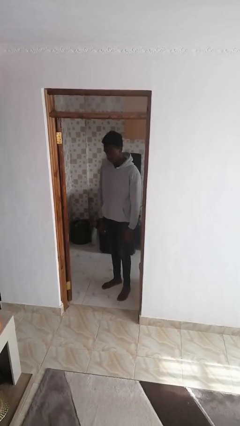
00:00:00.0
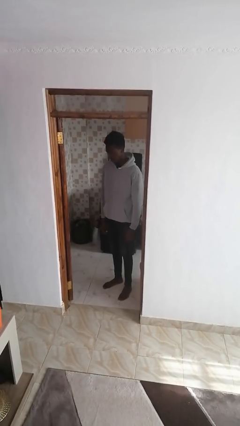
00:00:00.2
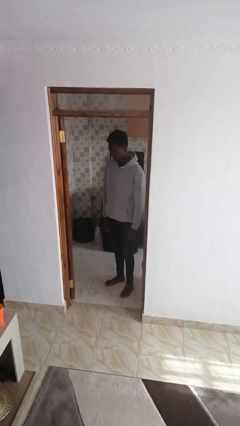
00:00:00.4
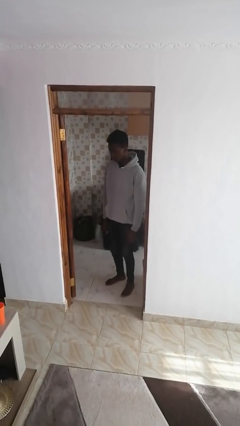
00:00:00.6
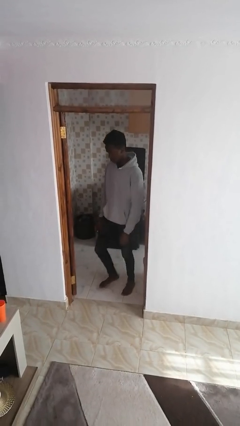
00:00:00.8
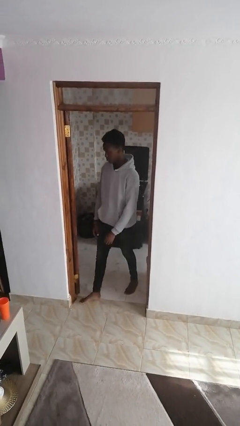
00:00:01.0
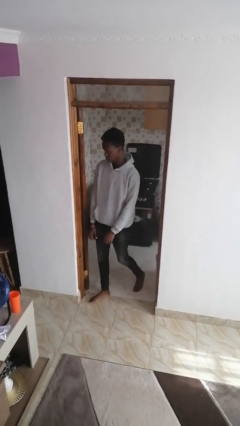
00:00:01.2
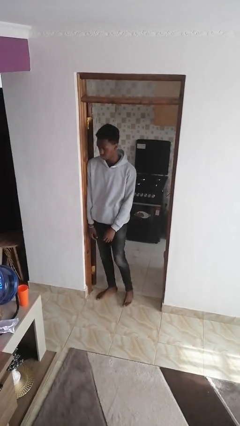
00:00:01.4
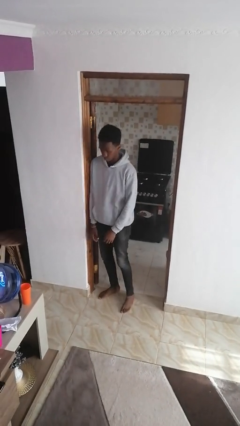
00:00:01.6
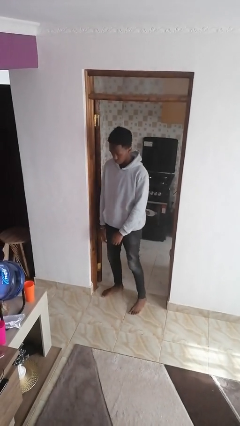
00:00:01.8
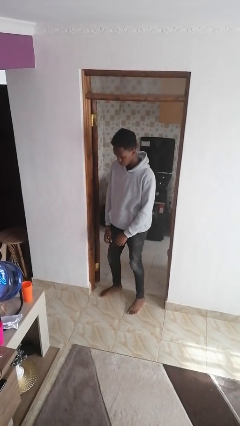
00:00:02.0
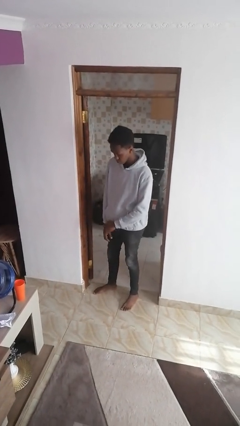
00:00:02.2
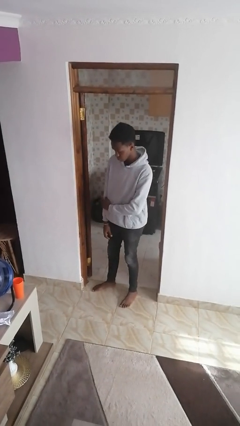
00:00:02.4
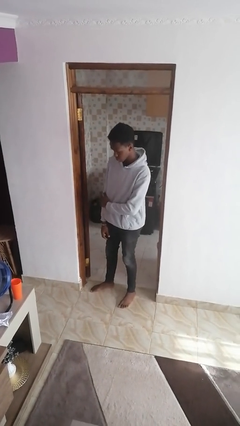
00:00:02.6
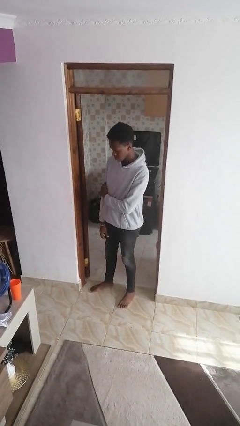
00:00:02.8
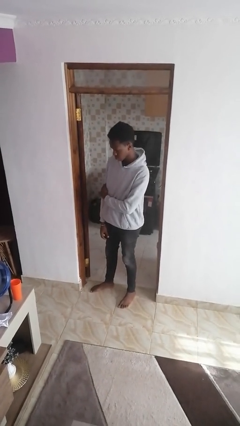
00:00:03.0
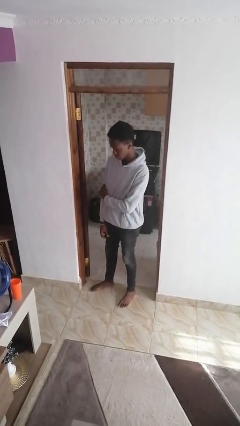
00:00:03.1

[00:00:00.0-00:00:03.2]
person bumps into wall

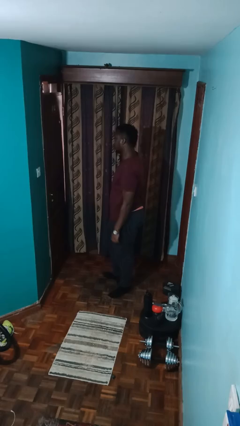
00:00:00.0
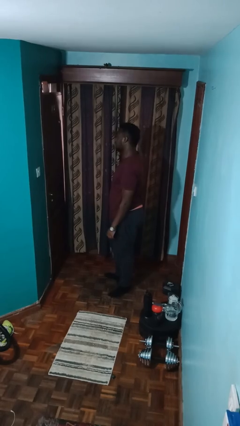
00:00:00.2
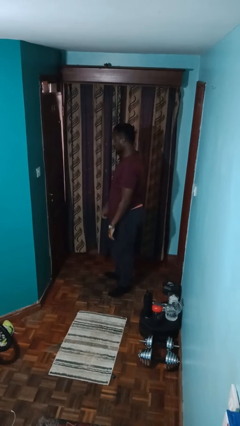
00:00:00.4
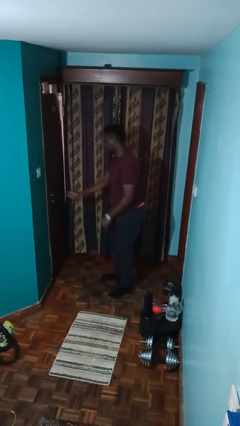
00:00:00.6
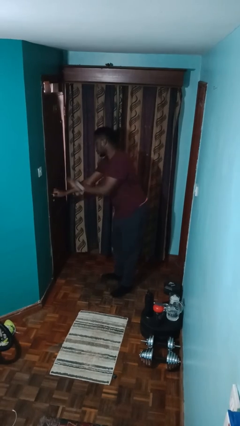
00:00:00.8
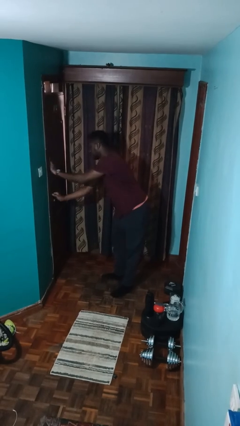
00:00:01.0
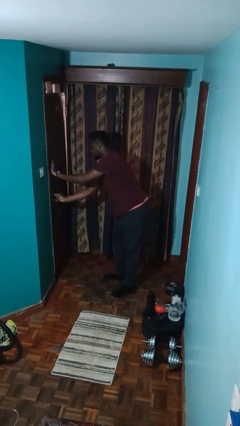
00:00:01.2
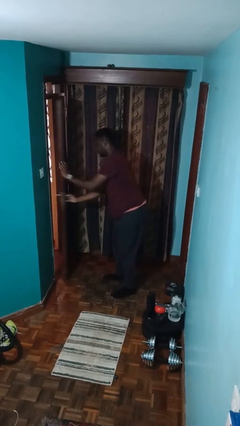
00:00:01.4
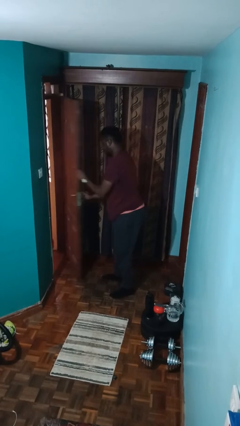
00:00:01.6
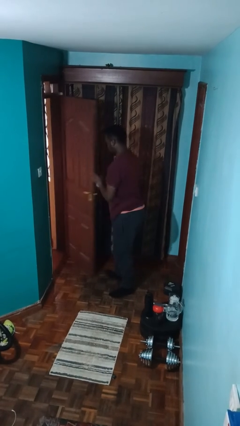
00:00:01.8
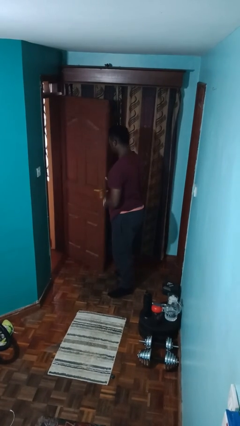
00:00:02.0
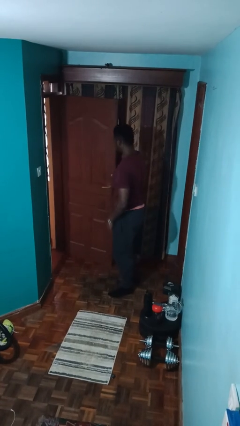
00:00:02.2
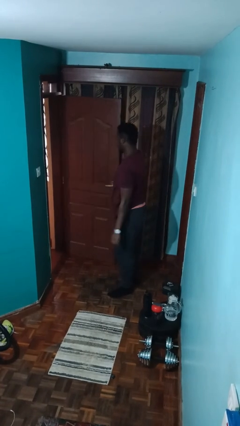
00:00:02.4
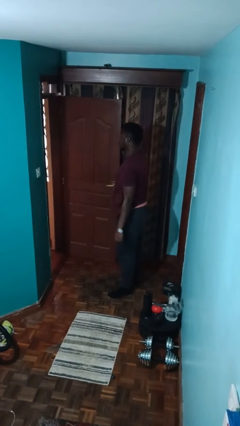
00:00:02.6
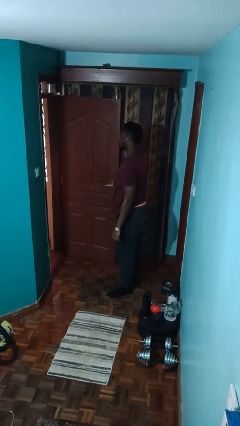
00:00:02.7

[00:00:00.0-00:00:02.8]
person opens facility door

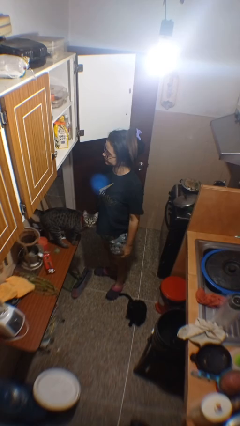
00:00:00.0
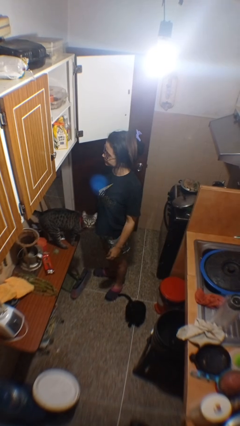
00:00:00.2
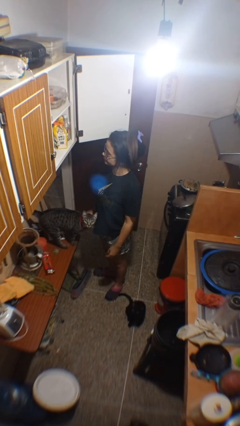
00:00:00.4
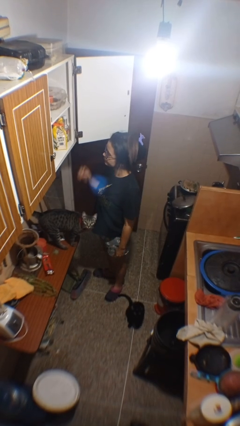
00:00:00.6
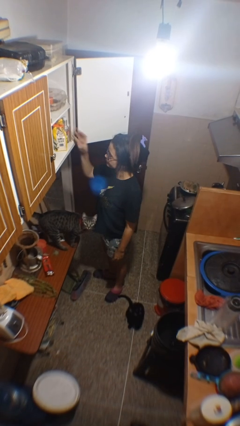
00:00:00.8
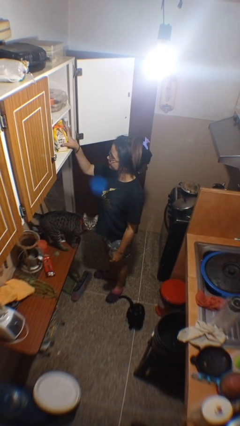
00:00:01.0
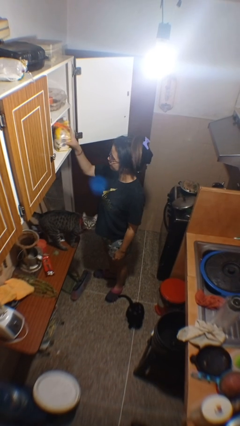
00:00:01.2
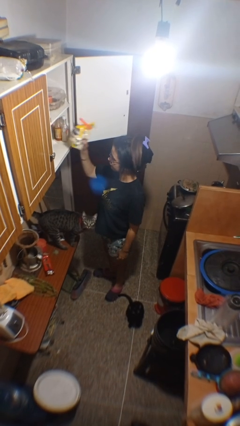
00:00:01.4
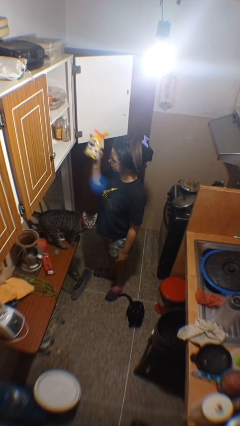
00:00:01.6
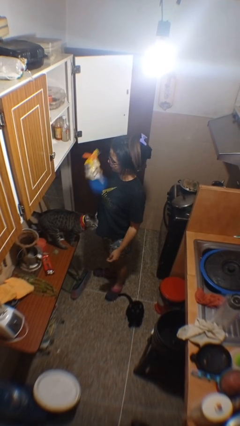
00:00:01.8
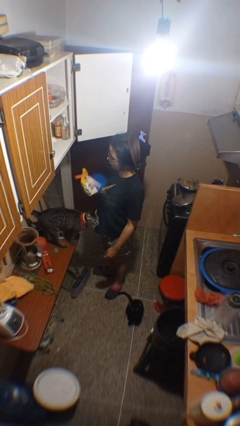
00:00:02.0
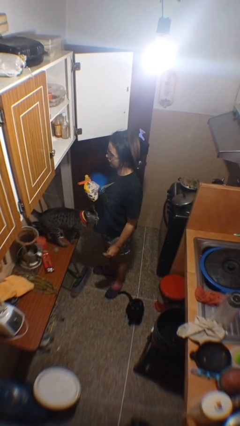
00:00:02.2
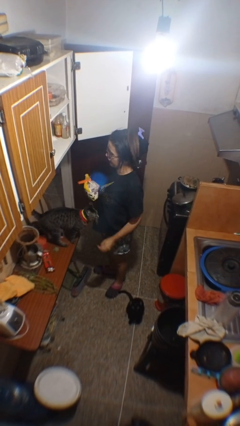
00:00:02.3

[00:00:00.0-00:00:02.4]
person picks up object from cabinet

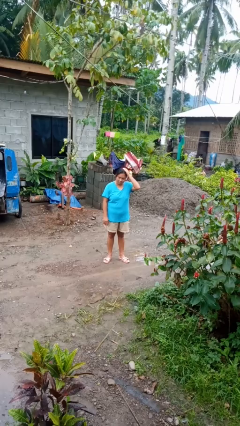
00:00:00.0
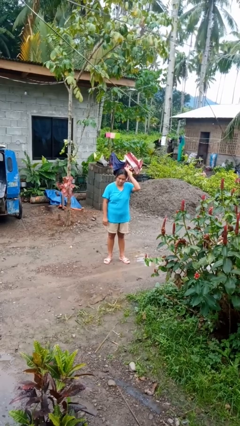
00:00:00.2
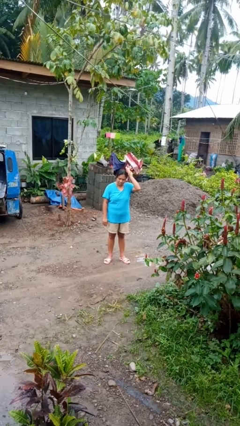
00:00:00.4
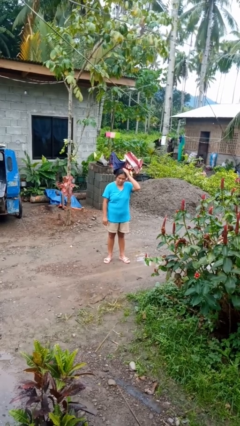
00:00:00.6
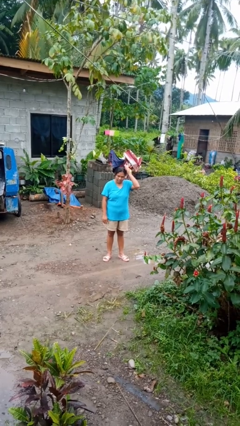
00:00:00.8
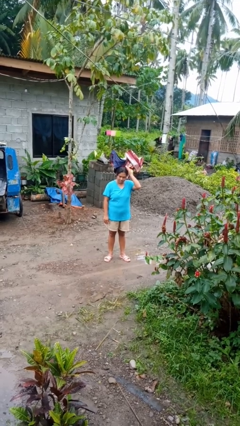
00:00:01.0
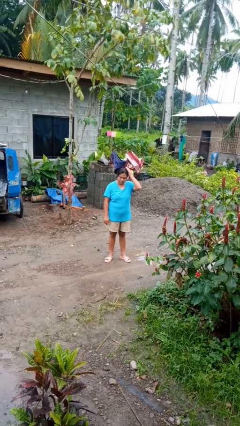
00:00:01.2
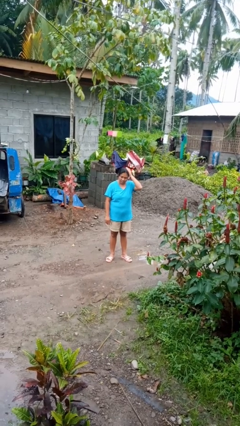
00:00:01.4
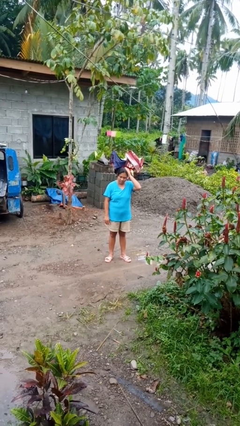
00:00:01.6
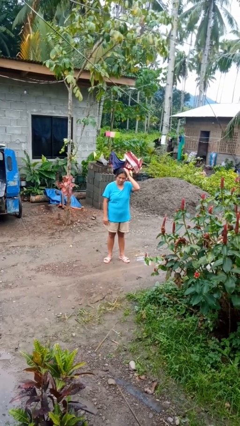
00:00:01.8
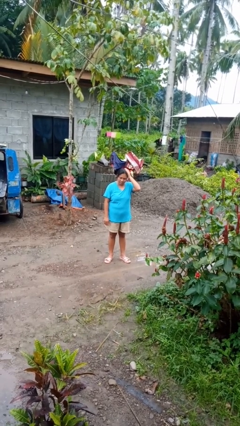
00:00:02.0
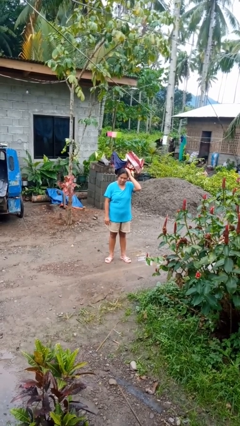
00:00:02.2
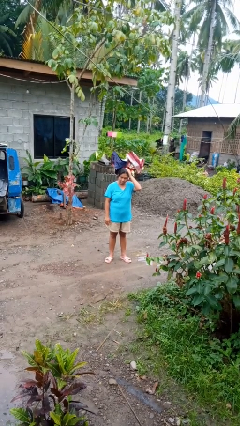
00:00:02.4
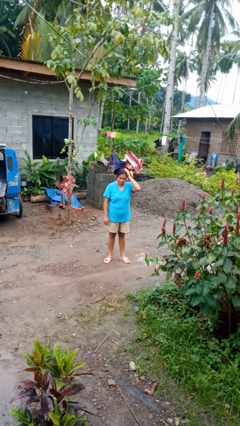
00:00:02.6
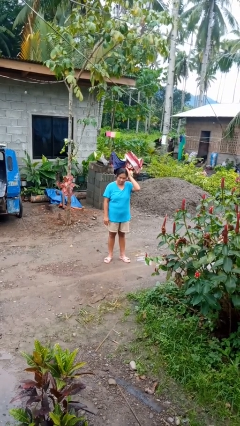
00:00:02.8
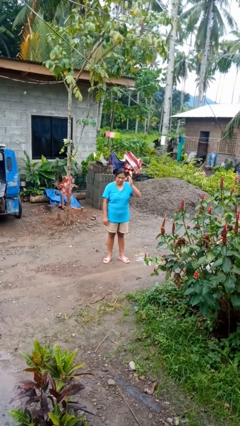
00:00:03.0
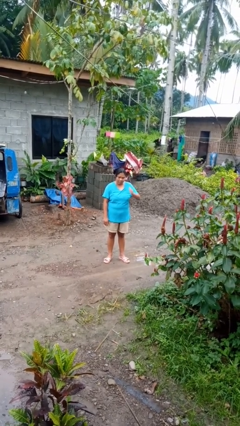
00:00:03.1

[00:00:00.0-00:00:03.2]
person pats head

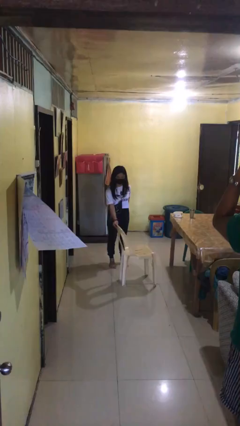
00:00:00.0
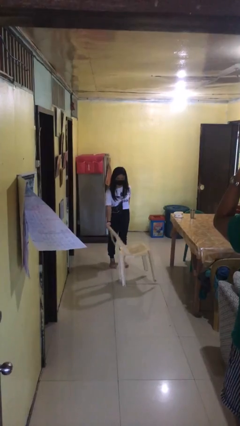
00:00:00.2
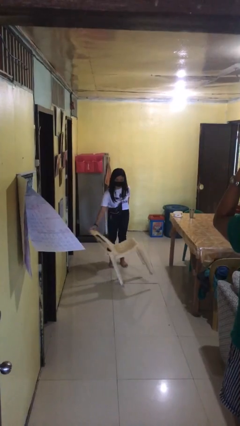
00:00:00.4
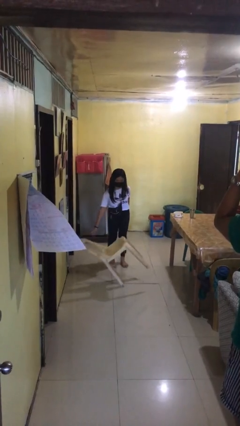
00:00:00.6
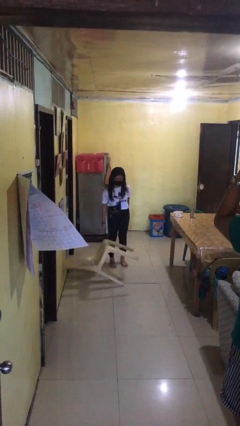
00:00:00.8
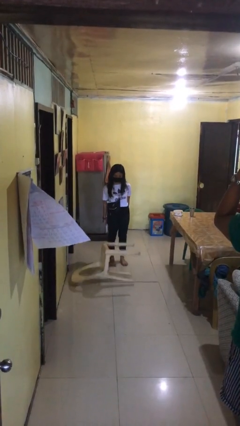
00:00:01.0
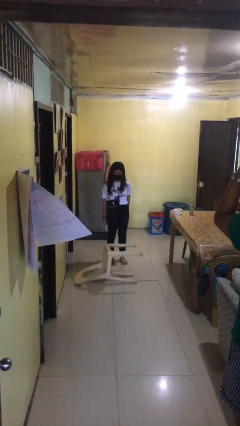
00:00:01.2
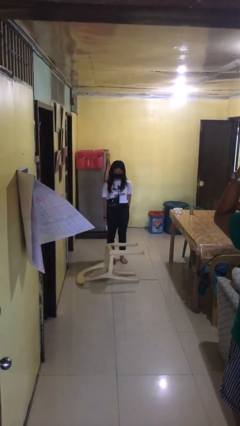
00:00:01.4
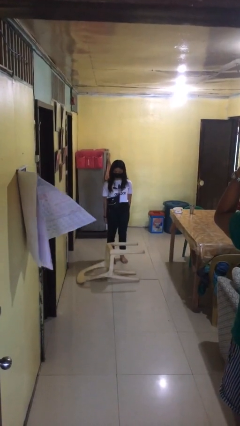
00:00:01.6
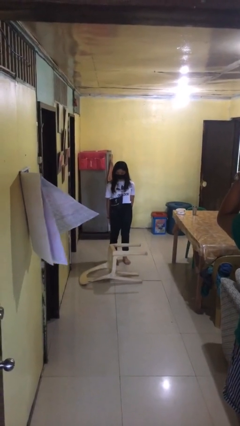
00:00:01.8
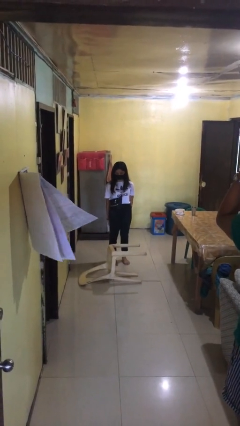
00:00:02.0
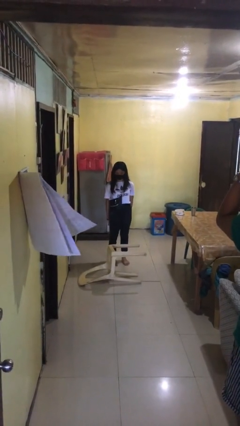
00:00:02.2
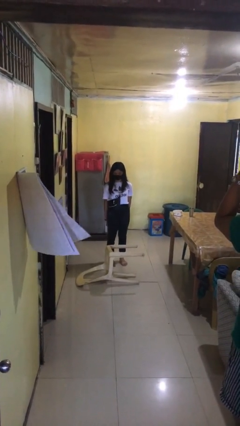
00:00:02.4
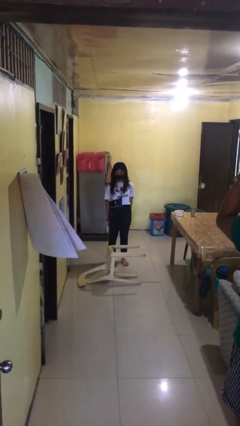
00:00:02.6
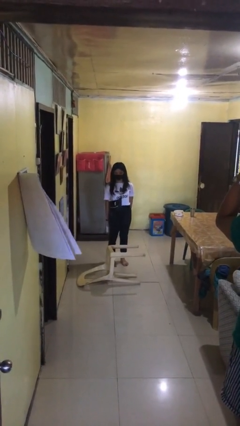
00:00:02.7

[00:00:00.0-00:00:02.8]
person knocks over furniture

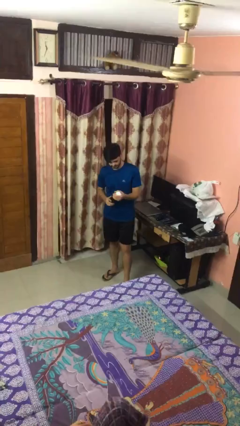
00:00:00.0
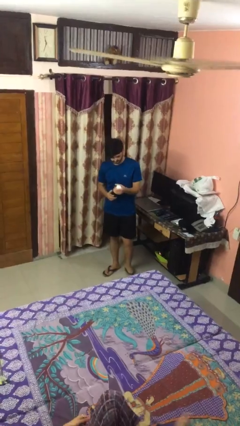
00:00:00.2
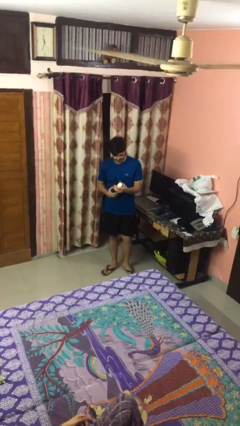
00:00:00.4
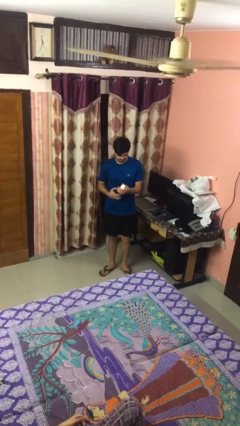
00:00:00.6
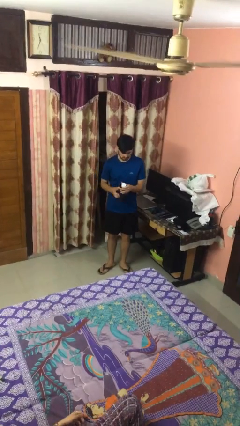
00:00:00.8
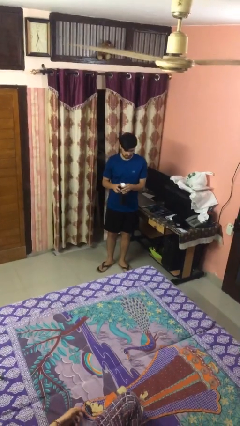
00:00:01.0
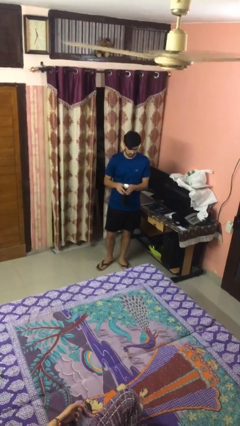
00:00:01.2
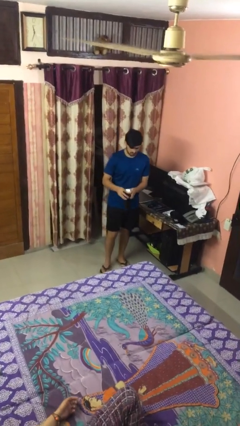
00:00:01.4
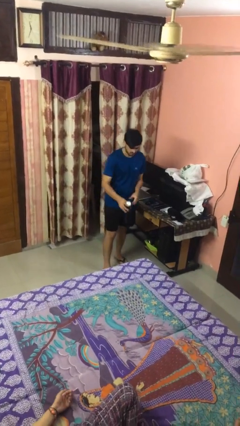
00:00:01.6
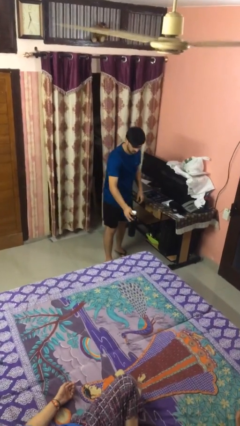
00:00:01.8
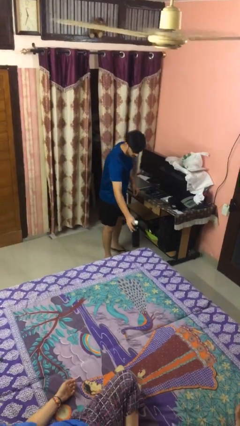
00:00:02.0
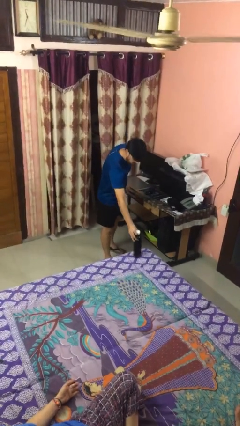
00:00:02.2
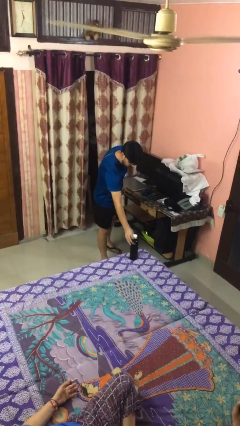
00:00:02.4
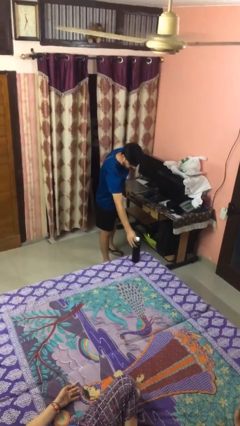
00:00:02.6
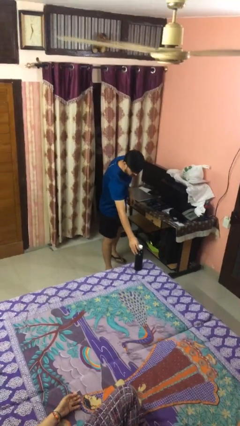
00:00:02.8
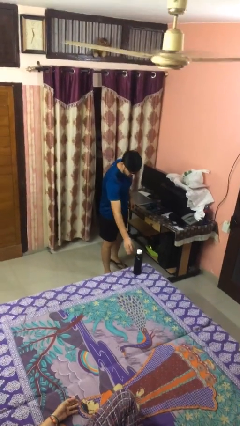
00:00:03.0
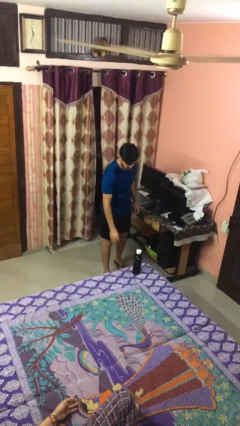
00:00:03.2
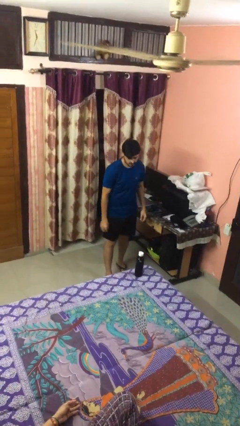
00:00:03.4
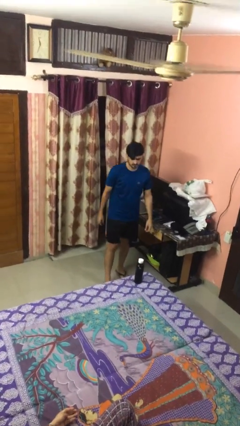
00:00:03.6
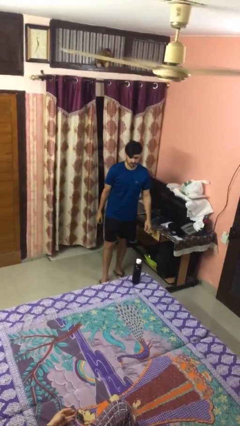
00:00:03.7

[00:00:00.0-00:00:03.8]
person puts down object on bed
